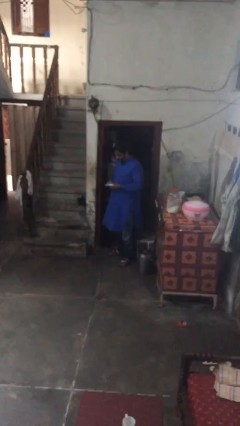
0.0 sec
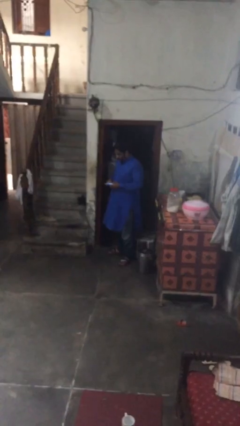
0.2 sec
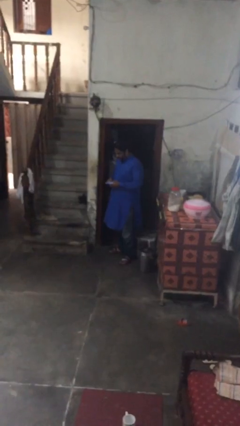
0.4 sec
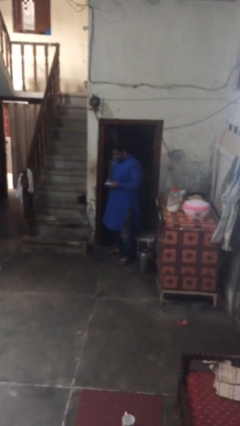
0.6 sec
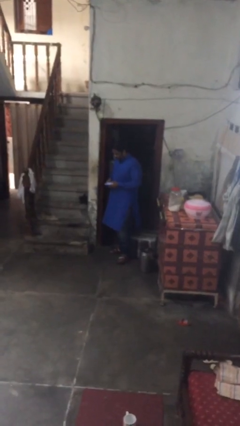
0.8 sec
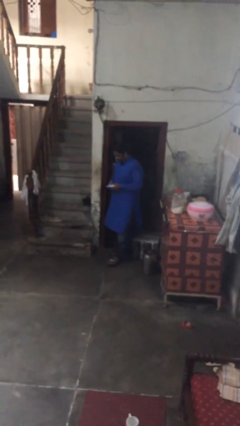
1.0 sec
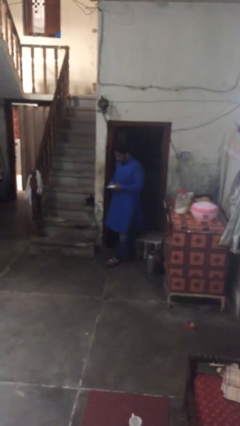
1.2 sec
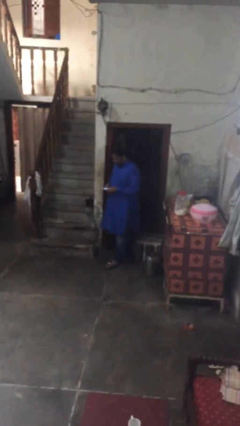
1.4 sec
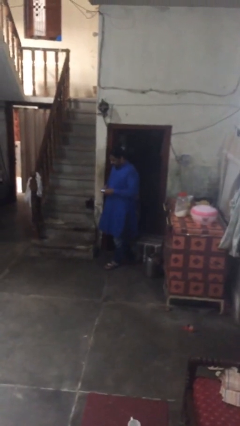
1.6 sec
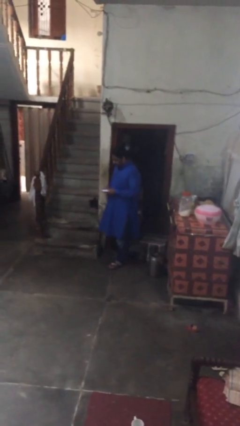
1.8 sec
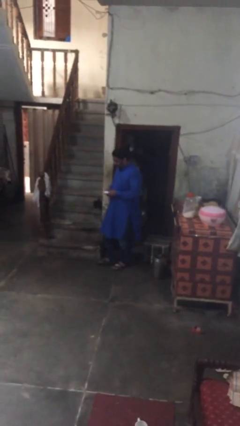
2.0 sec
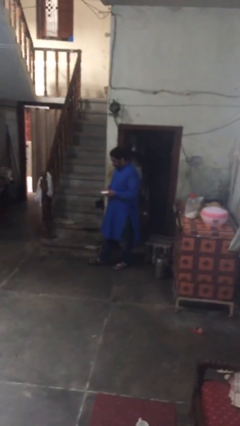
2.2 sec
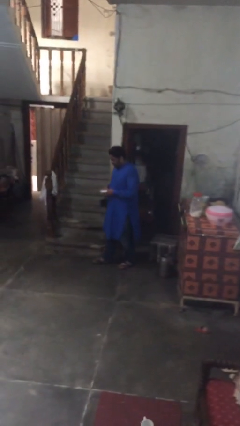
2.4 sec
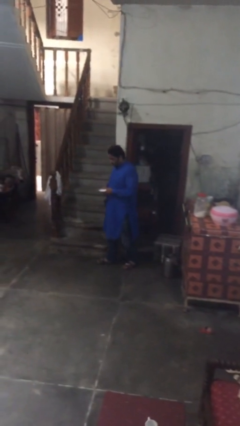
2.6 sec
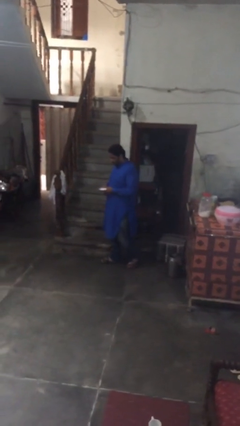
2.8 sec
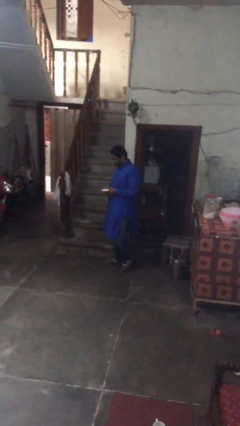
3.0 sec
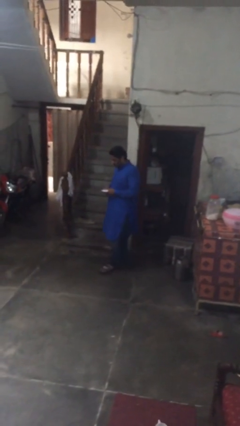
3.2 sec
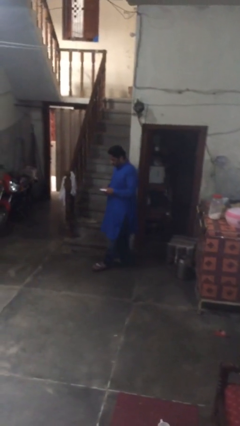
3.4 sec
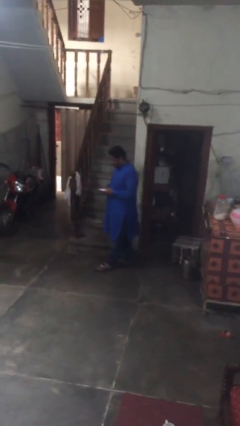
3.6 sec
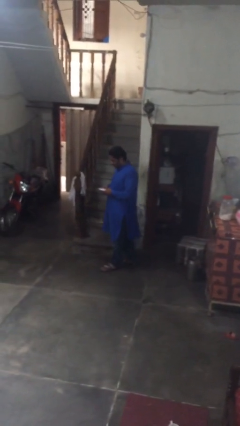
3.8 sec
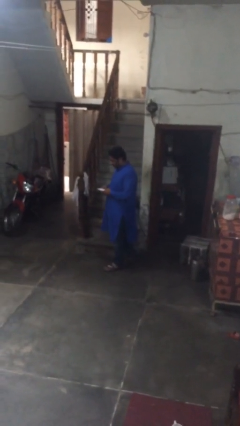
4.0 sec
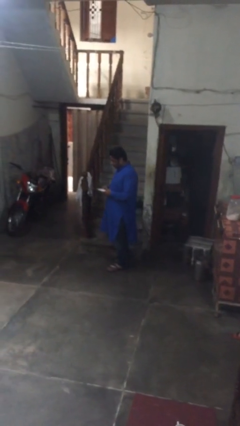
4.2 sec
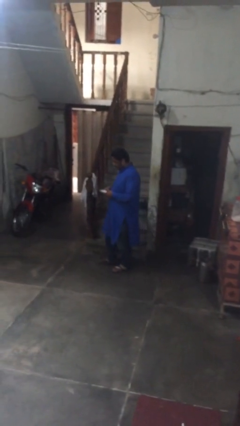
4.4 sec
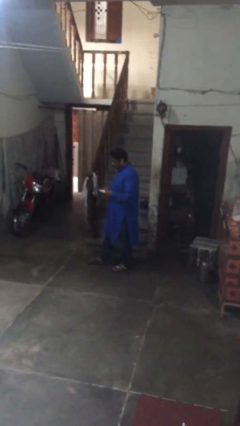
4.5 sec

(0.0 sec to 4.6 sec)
person texts on phone

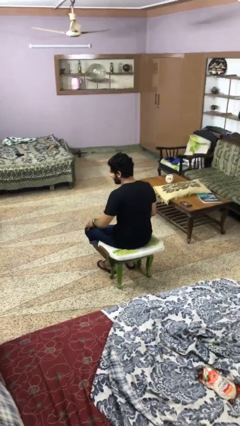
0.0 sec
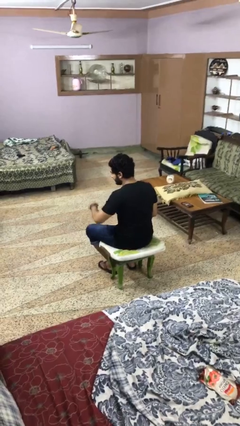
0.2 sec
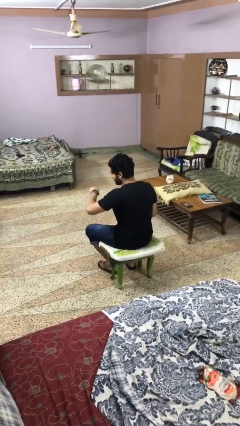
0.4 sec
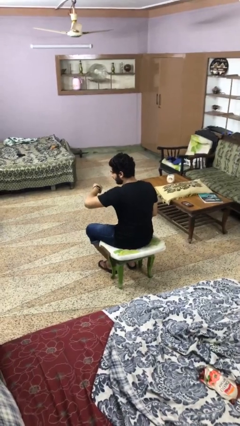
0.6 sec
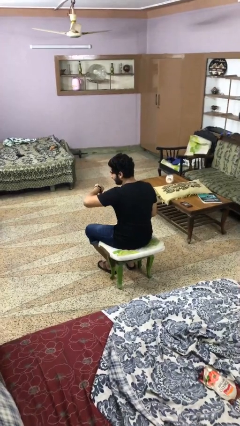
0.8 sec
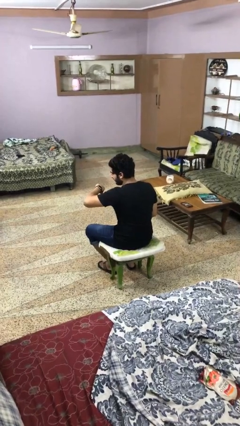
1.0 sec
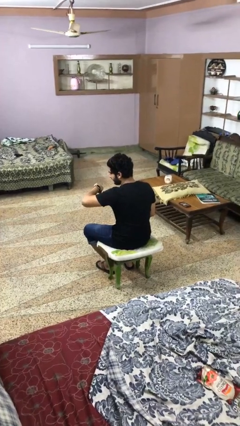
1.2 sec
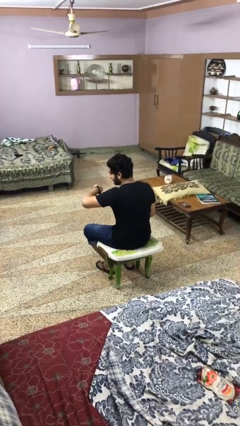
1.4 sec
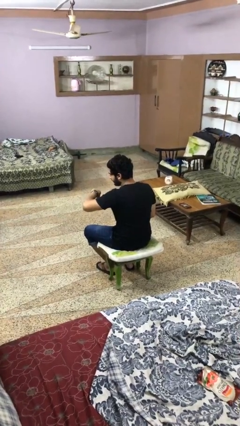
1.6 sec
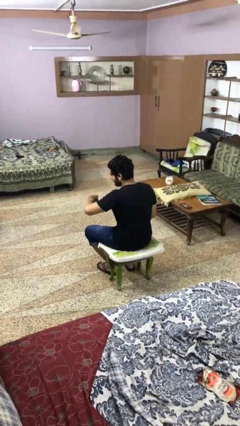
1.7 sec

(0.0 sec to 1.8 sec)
person looks at wristwatch

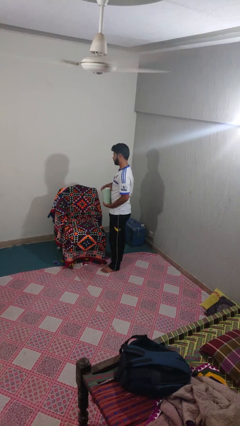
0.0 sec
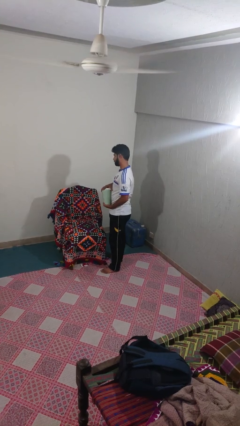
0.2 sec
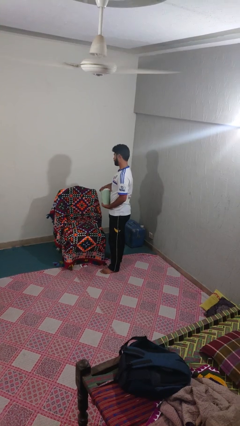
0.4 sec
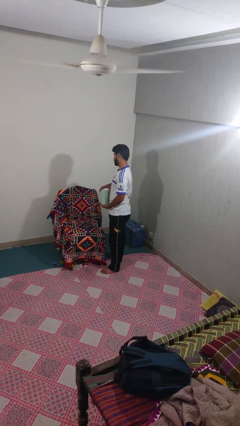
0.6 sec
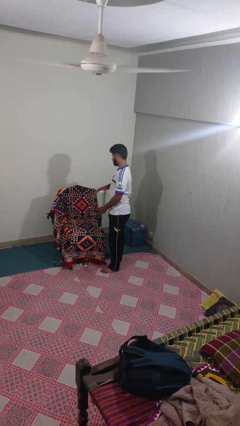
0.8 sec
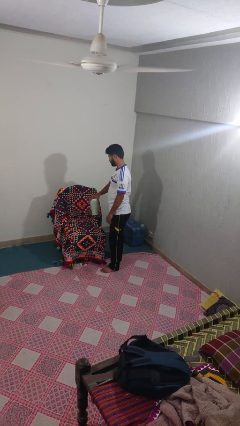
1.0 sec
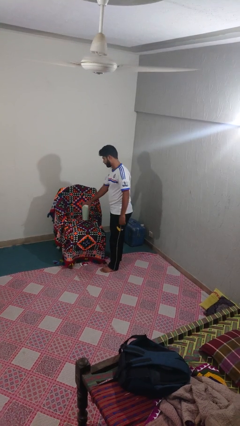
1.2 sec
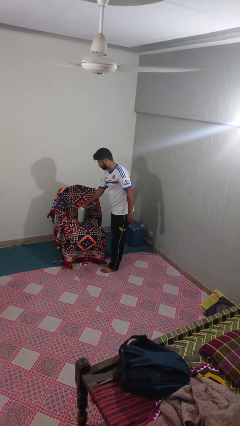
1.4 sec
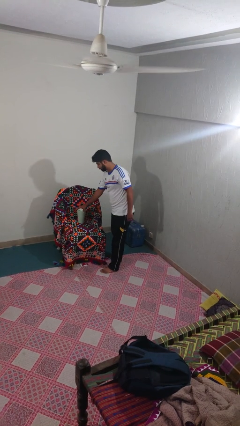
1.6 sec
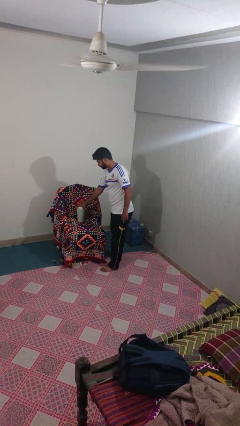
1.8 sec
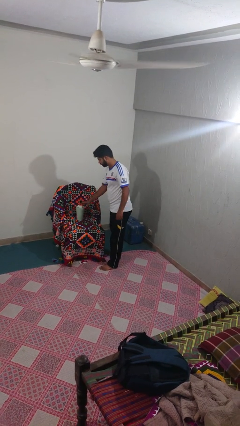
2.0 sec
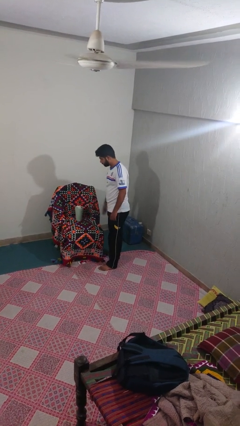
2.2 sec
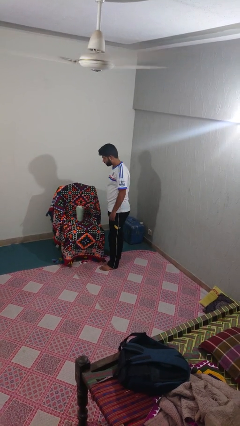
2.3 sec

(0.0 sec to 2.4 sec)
person puts down object on couch

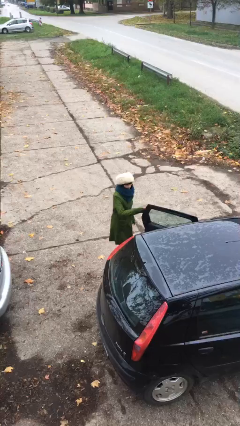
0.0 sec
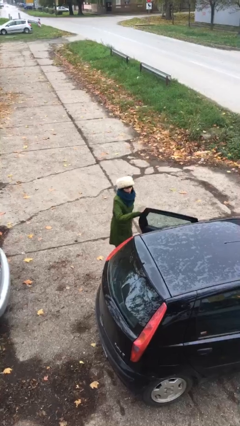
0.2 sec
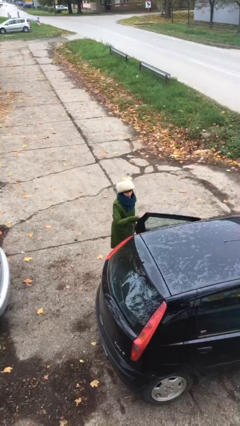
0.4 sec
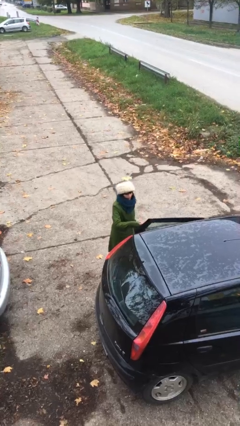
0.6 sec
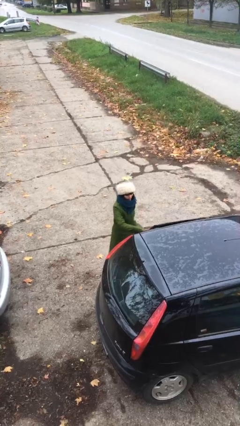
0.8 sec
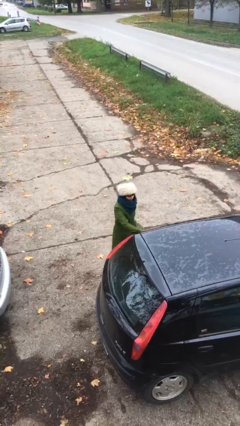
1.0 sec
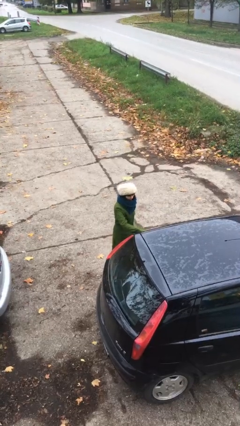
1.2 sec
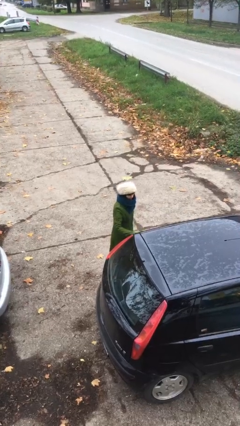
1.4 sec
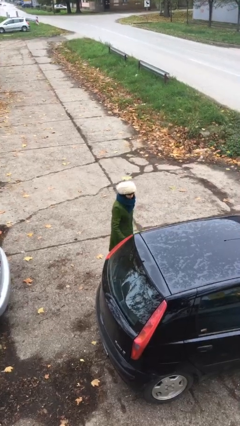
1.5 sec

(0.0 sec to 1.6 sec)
person closes car door

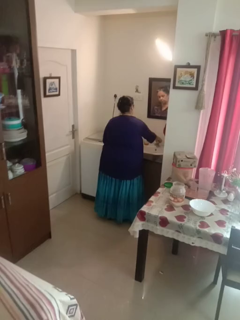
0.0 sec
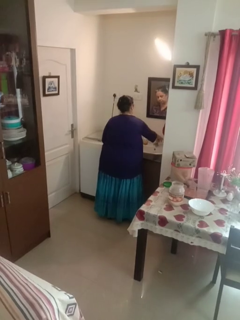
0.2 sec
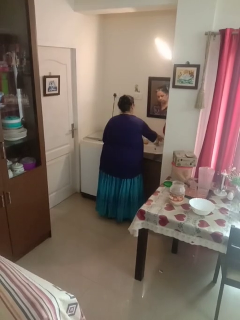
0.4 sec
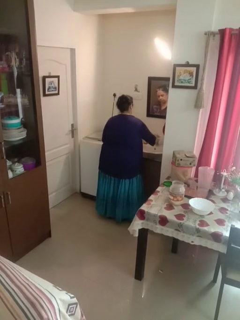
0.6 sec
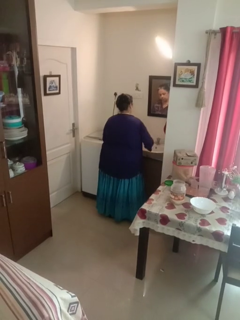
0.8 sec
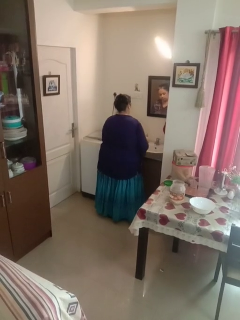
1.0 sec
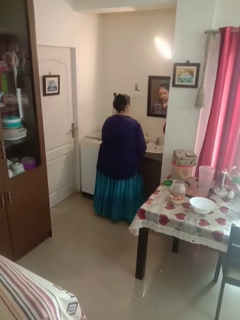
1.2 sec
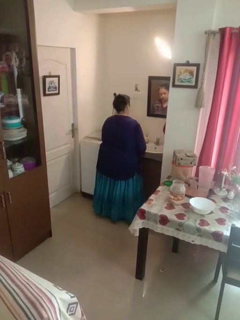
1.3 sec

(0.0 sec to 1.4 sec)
person turns on faucet

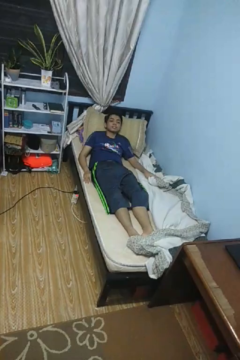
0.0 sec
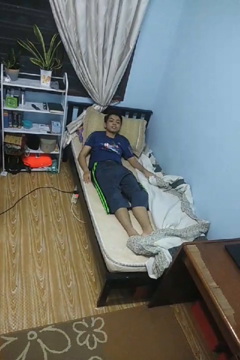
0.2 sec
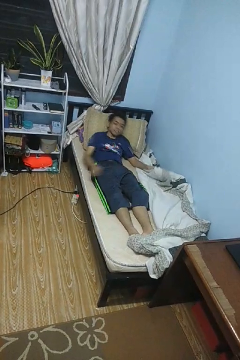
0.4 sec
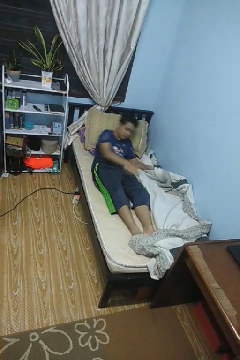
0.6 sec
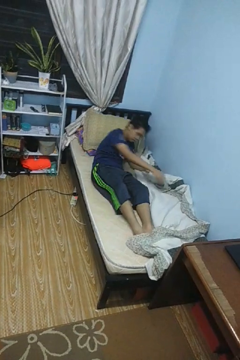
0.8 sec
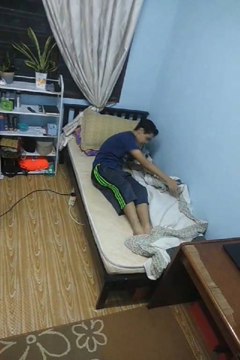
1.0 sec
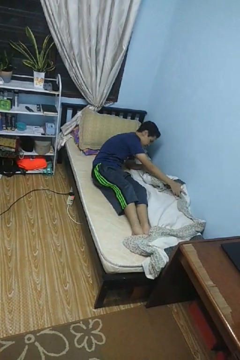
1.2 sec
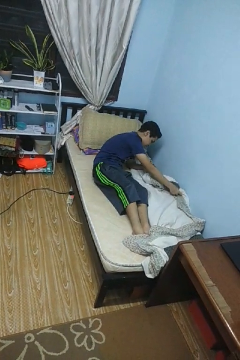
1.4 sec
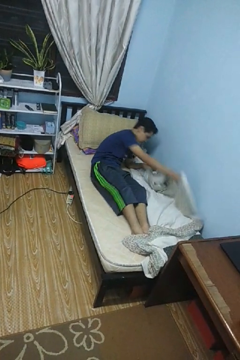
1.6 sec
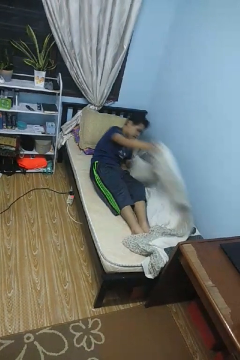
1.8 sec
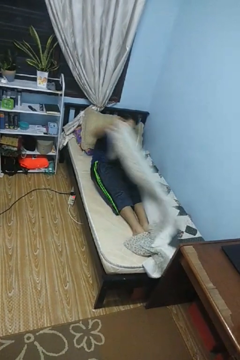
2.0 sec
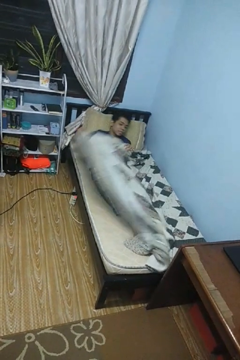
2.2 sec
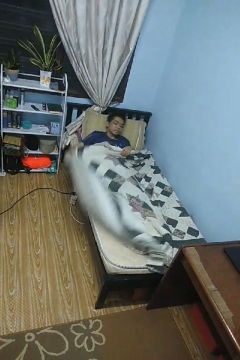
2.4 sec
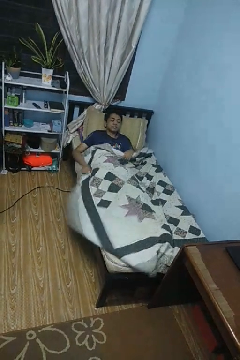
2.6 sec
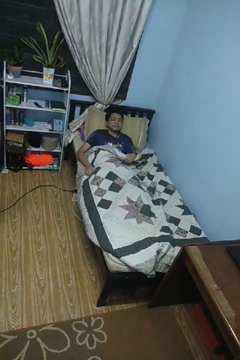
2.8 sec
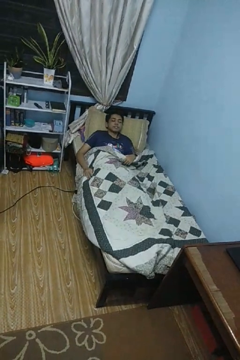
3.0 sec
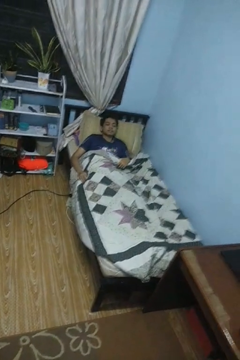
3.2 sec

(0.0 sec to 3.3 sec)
person covers with bedsheets

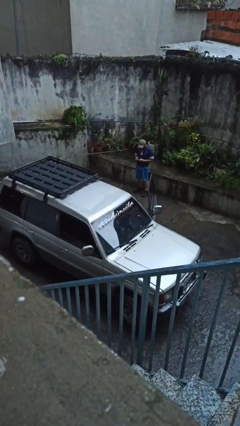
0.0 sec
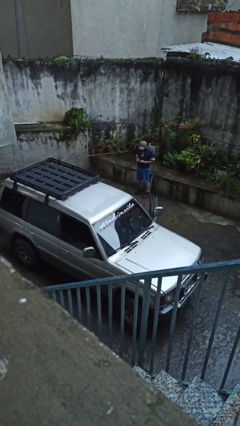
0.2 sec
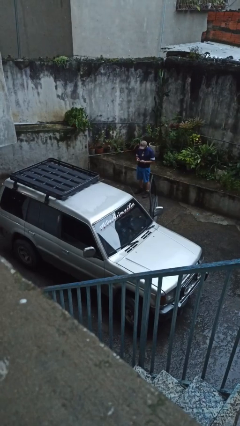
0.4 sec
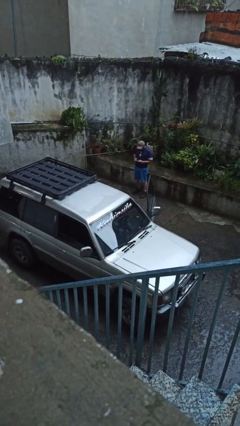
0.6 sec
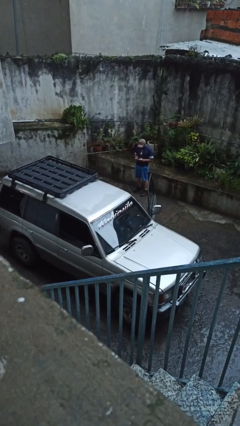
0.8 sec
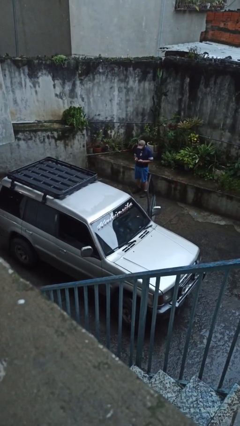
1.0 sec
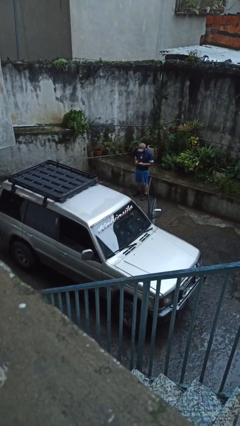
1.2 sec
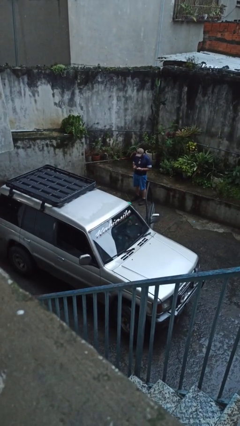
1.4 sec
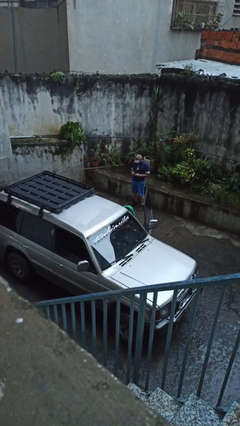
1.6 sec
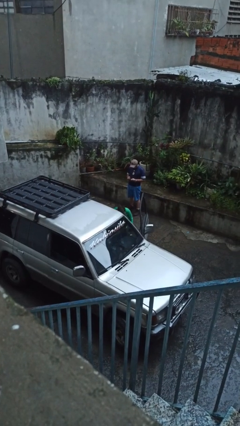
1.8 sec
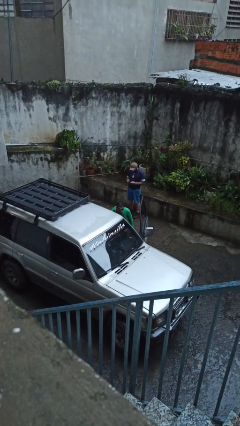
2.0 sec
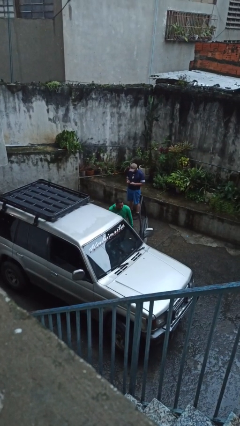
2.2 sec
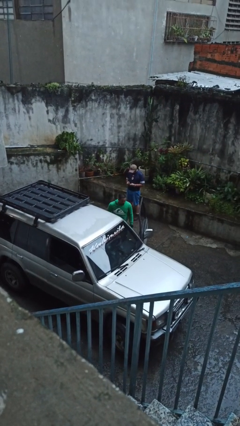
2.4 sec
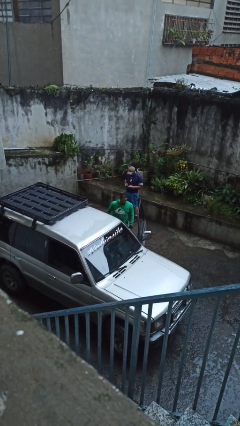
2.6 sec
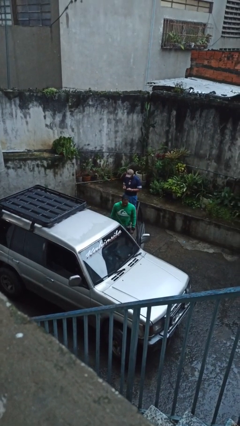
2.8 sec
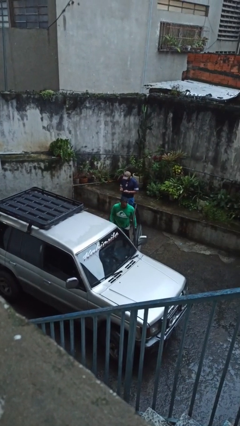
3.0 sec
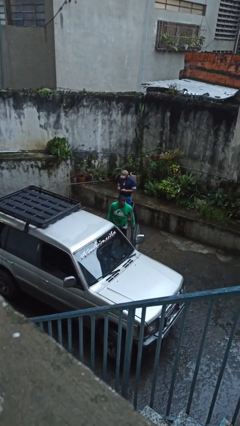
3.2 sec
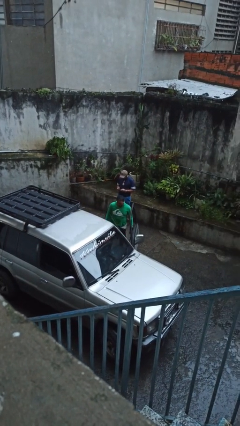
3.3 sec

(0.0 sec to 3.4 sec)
person exits car
